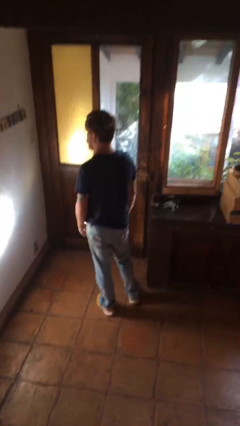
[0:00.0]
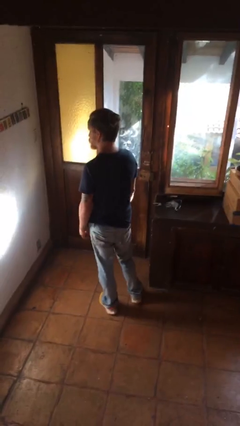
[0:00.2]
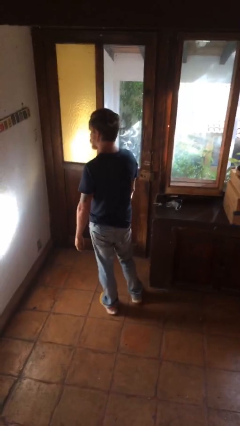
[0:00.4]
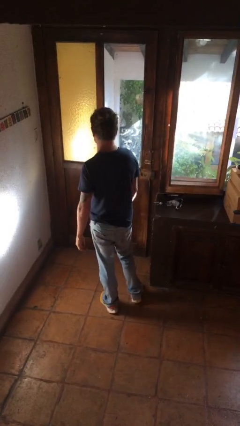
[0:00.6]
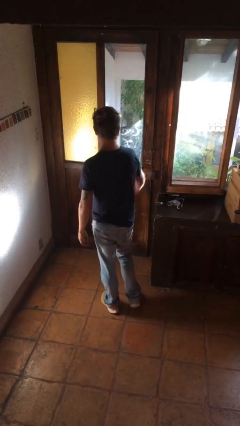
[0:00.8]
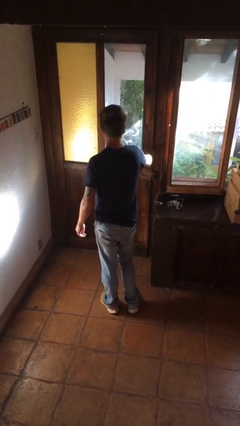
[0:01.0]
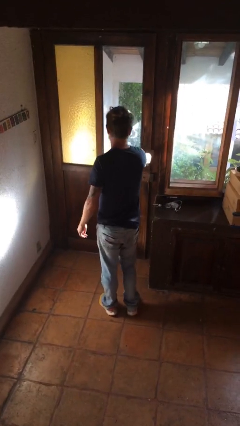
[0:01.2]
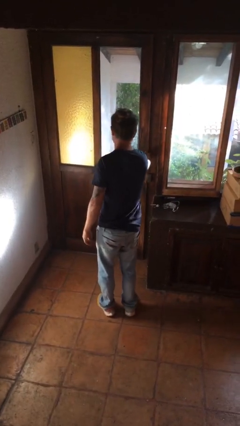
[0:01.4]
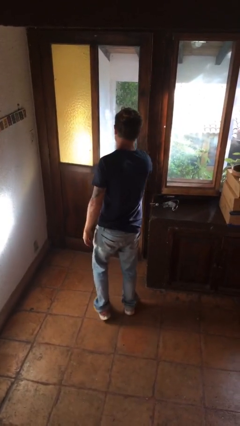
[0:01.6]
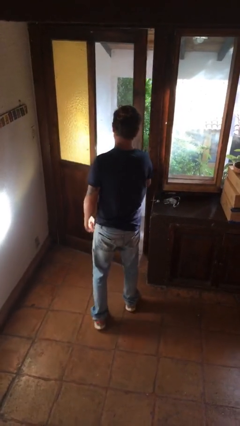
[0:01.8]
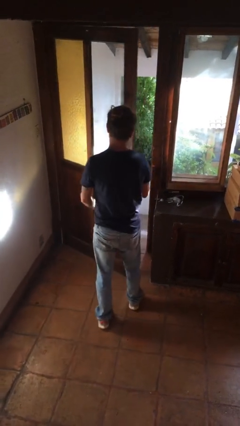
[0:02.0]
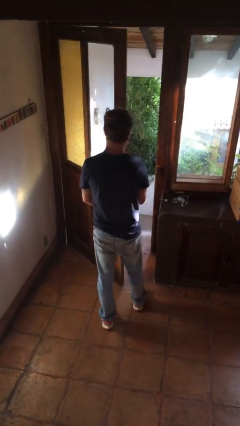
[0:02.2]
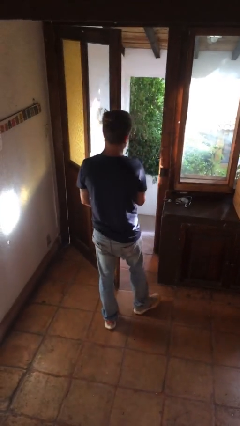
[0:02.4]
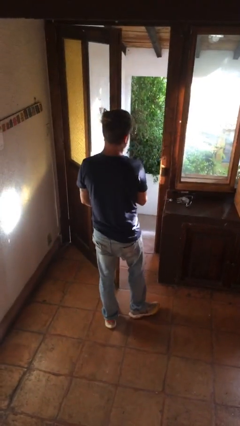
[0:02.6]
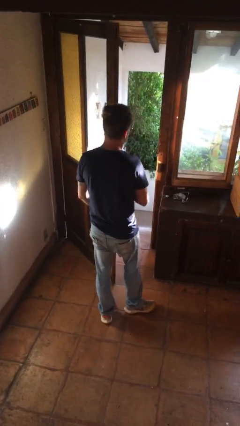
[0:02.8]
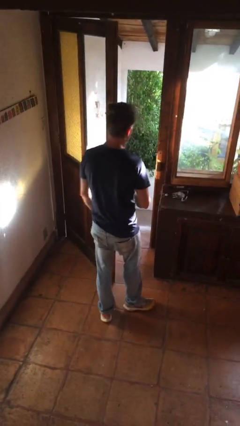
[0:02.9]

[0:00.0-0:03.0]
person opens facility door

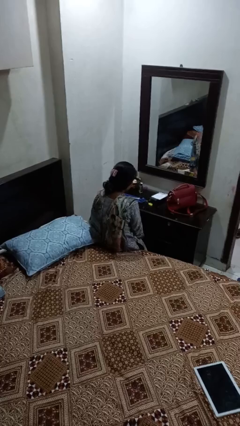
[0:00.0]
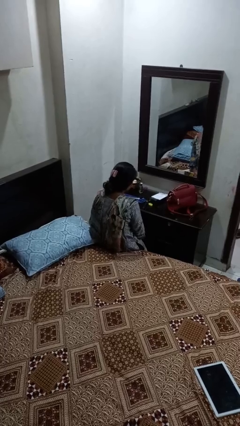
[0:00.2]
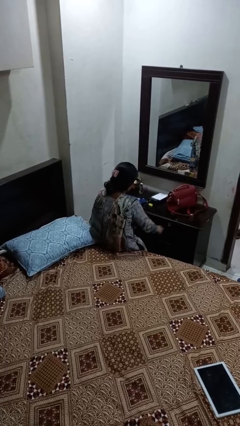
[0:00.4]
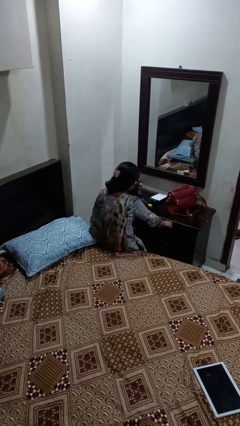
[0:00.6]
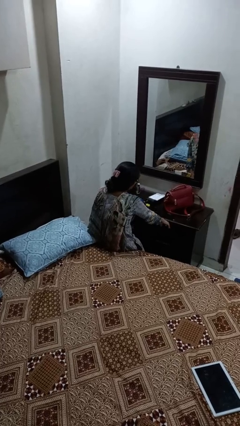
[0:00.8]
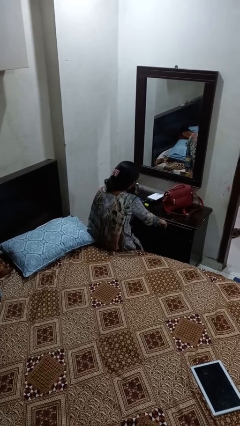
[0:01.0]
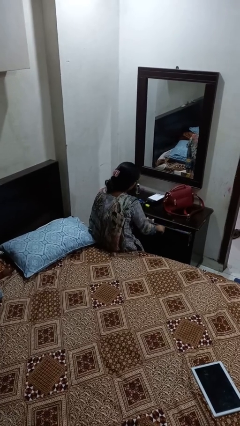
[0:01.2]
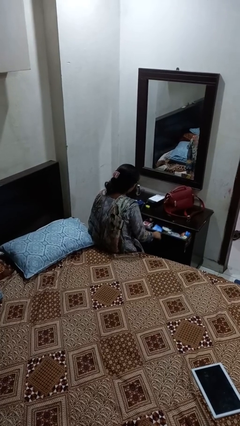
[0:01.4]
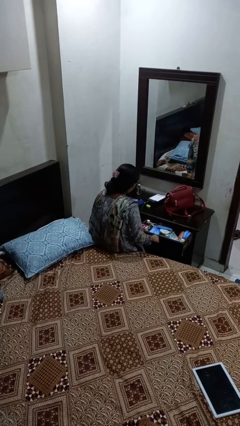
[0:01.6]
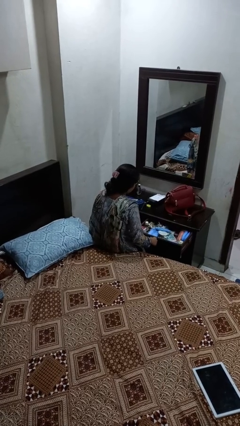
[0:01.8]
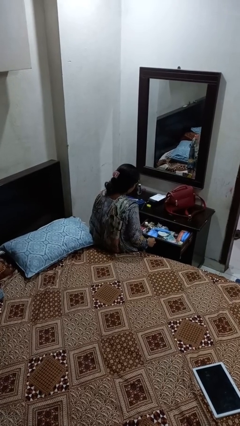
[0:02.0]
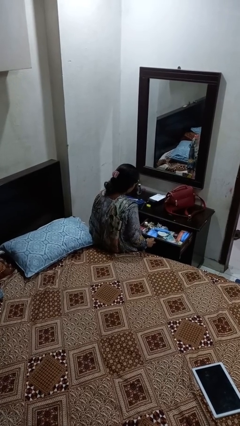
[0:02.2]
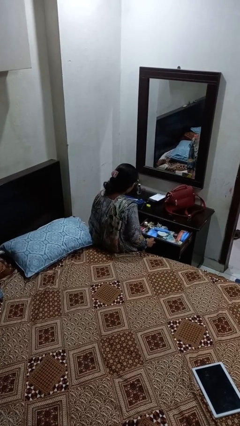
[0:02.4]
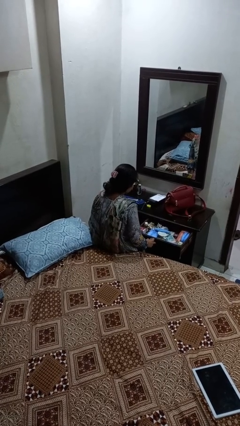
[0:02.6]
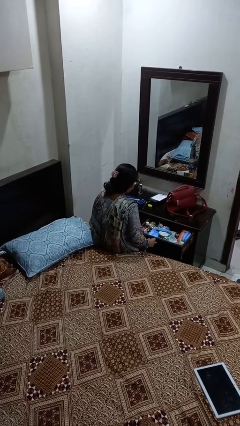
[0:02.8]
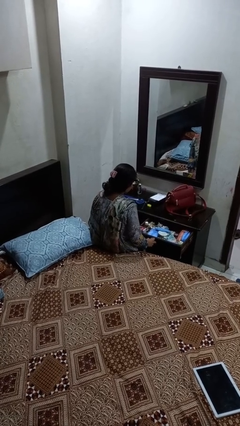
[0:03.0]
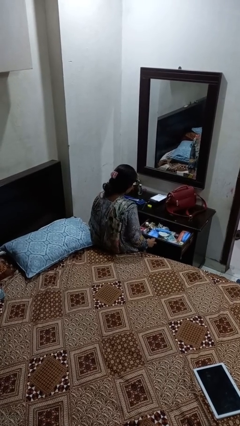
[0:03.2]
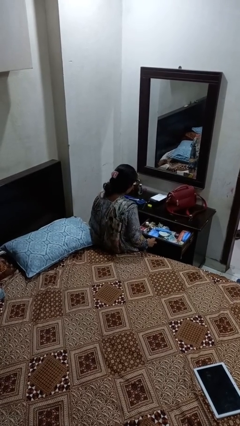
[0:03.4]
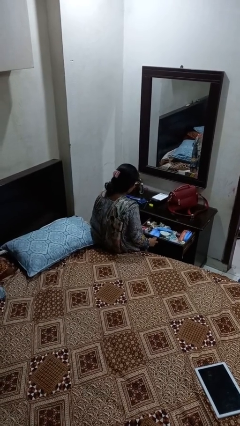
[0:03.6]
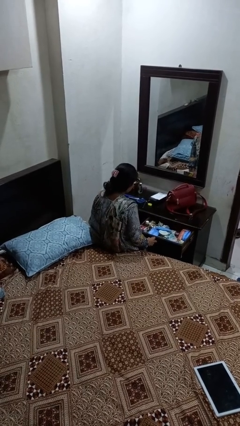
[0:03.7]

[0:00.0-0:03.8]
person opens dresser drawer

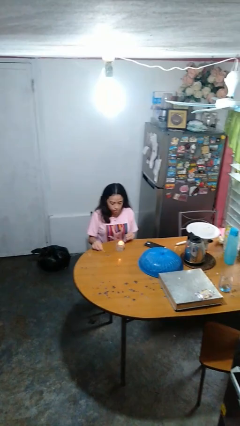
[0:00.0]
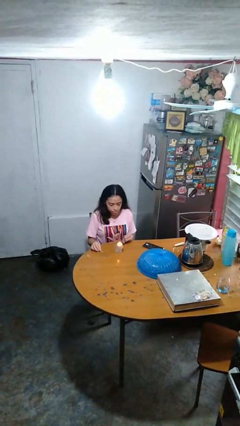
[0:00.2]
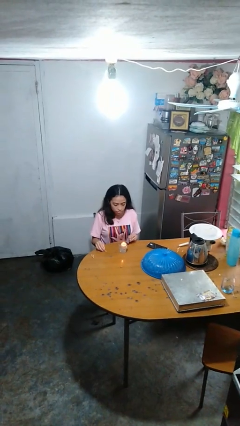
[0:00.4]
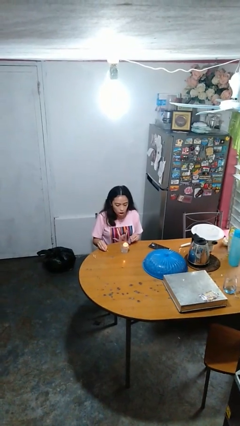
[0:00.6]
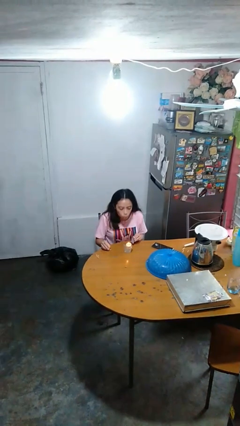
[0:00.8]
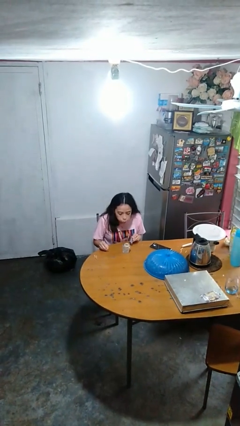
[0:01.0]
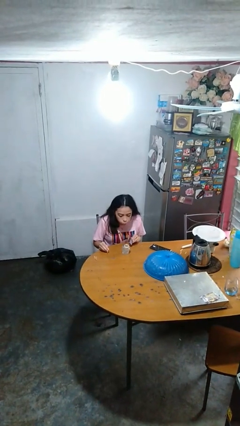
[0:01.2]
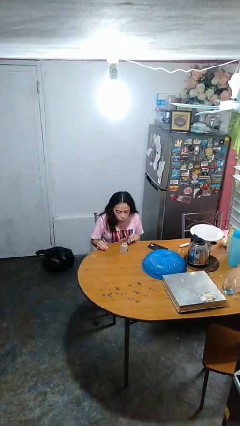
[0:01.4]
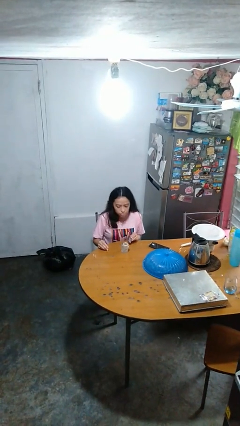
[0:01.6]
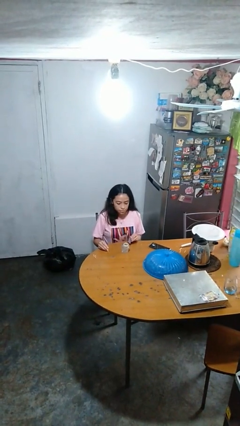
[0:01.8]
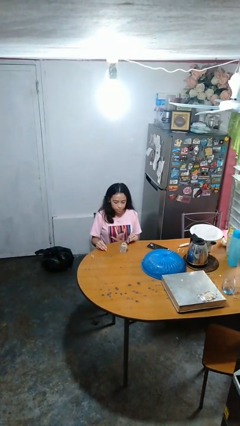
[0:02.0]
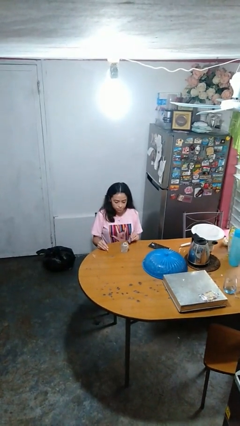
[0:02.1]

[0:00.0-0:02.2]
person extinguishes candle

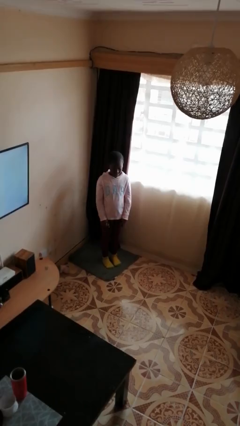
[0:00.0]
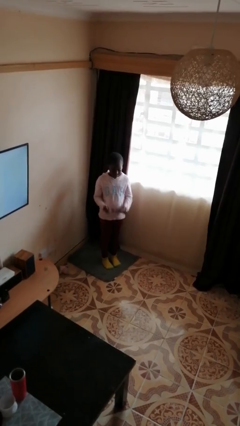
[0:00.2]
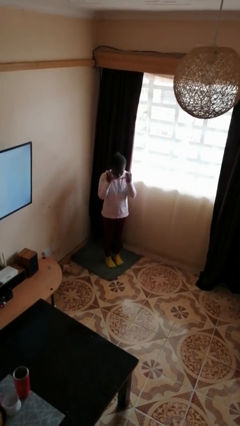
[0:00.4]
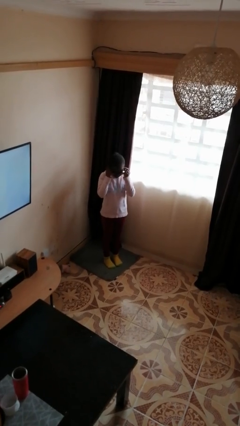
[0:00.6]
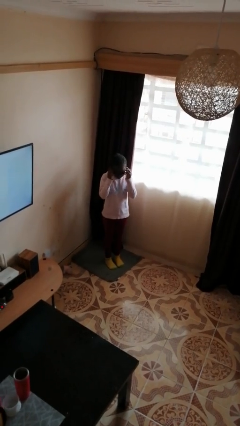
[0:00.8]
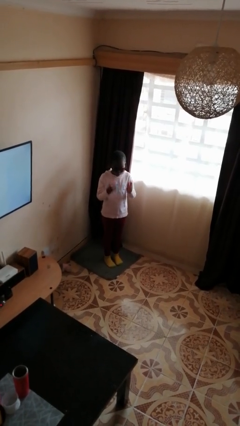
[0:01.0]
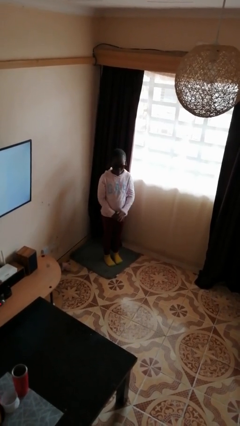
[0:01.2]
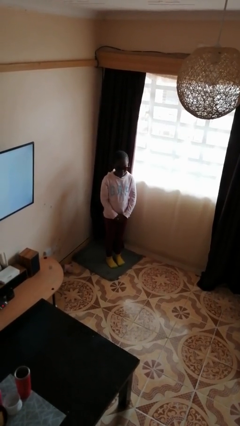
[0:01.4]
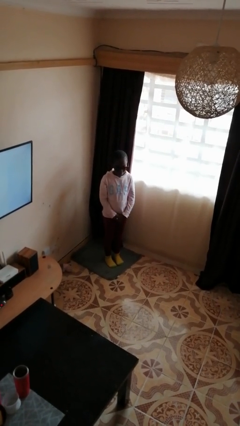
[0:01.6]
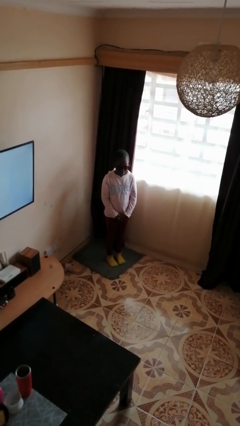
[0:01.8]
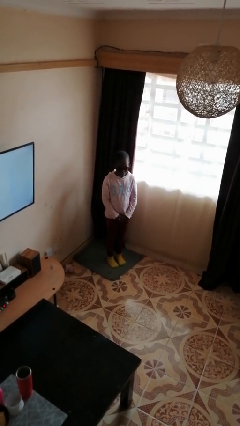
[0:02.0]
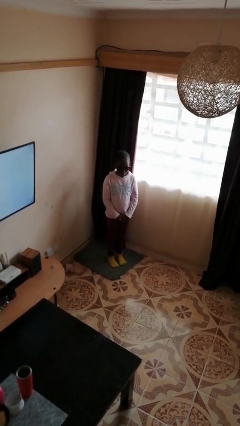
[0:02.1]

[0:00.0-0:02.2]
person puts on sunglasses

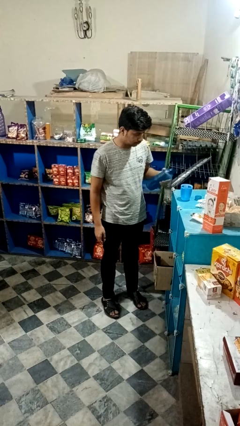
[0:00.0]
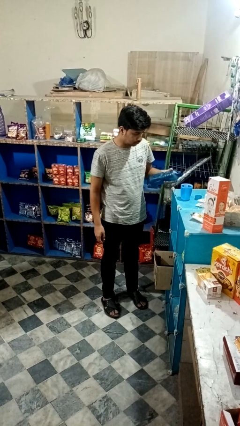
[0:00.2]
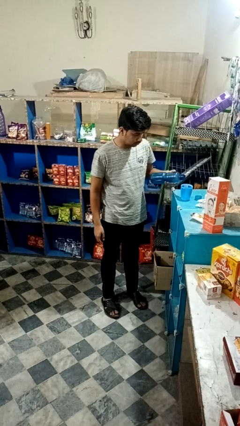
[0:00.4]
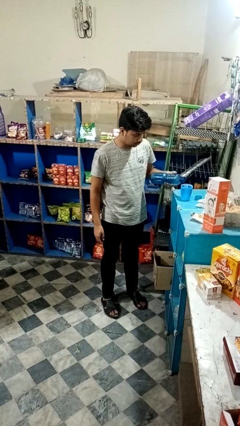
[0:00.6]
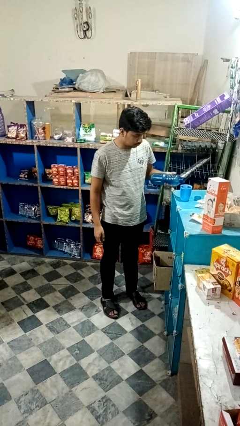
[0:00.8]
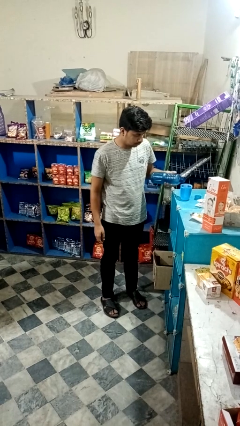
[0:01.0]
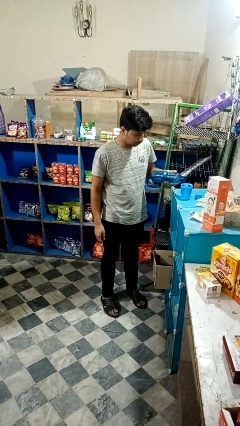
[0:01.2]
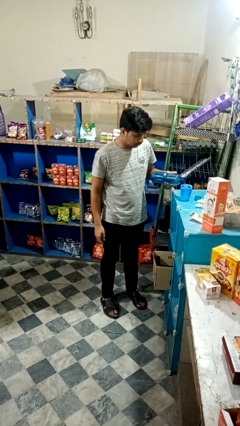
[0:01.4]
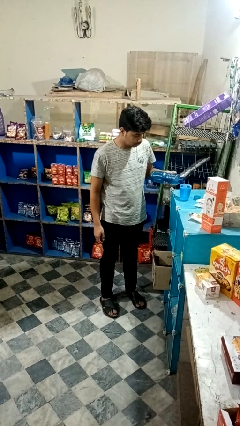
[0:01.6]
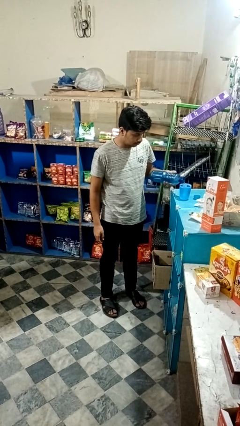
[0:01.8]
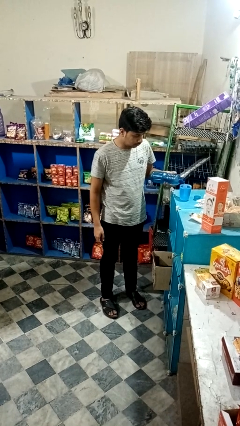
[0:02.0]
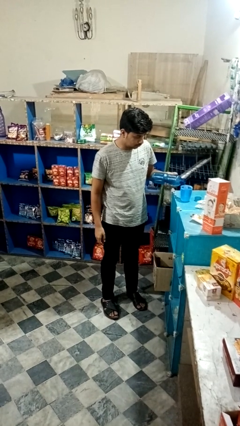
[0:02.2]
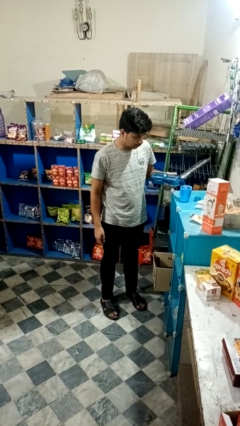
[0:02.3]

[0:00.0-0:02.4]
person pours liquid into cup

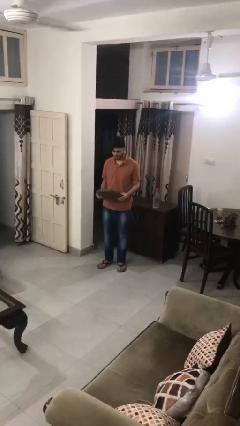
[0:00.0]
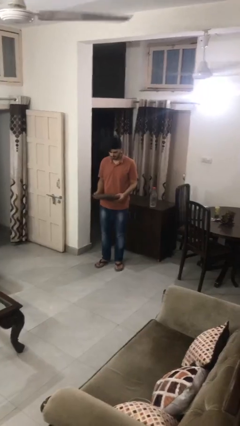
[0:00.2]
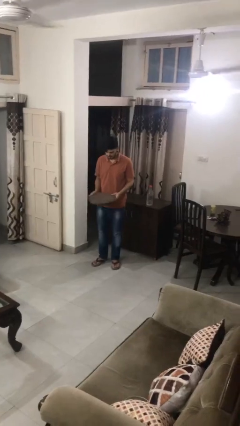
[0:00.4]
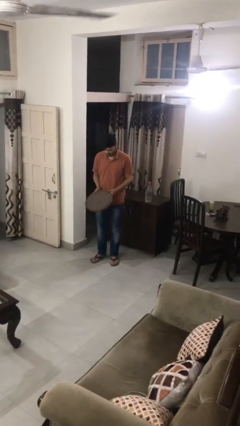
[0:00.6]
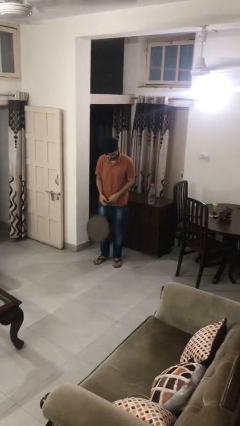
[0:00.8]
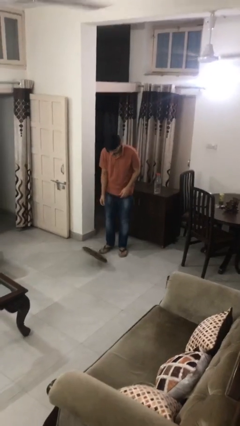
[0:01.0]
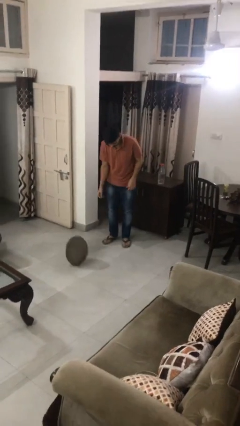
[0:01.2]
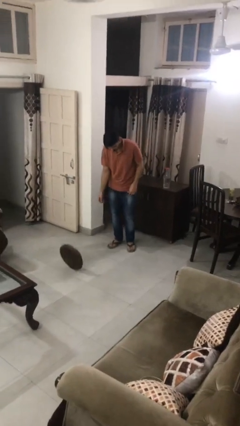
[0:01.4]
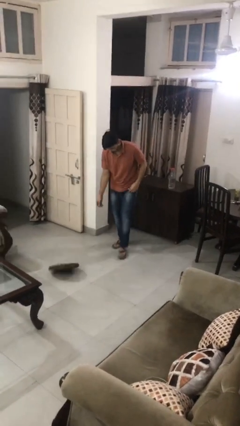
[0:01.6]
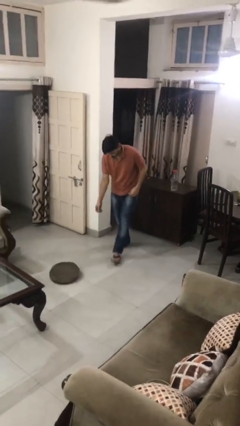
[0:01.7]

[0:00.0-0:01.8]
person drops object

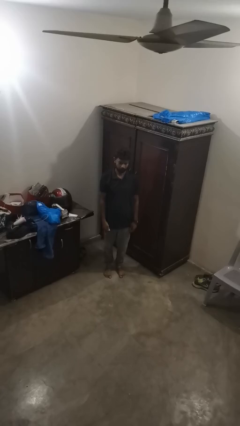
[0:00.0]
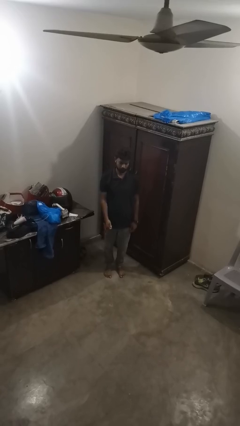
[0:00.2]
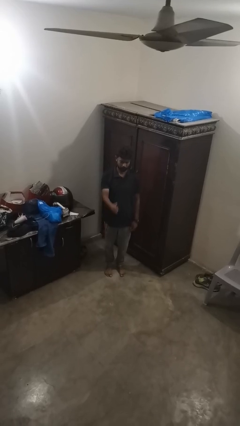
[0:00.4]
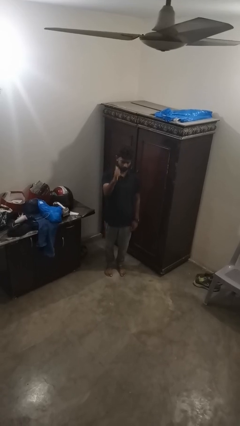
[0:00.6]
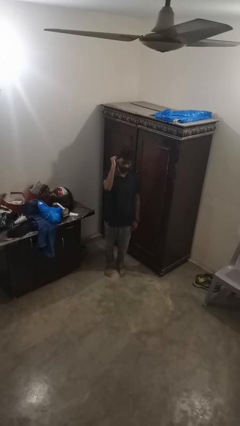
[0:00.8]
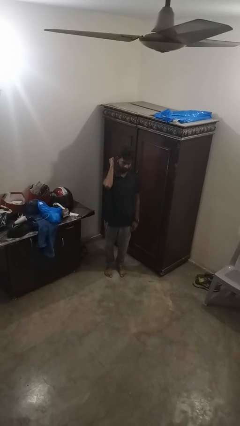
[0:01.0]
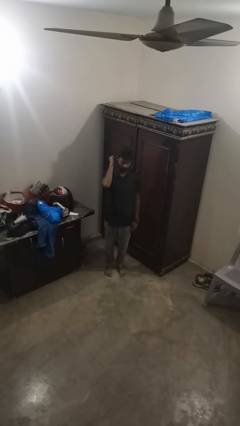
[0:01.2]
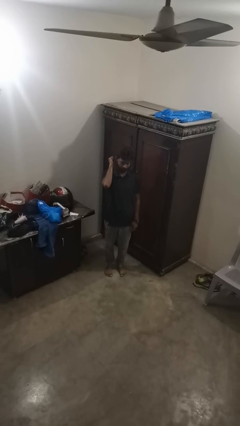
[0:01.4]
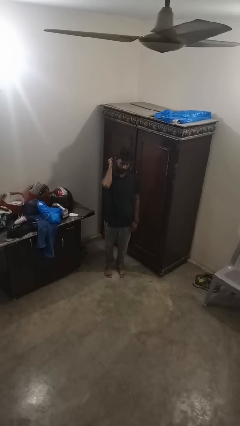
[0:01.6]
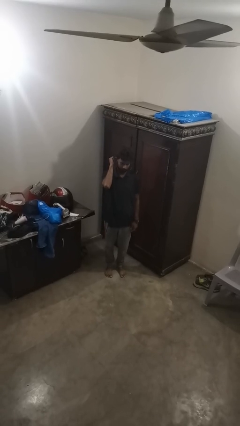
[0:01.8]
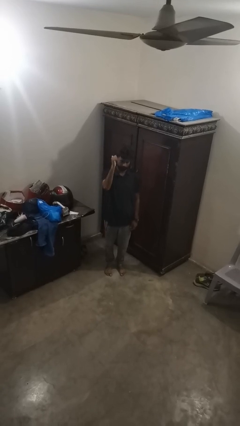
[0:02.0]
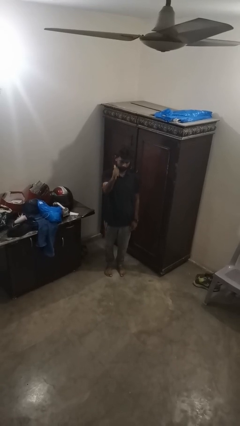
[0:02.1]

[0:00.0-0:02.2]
person gestures behind me
